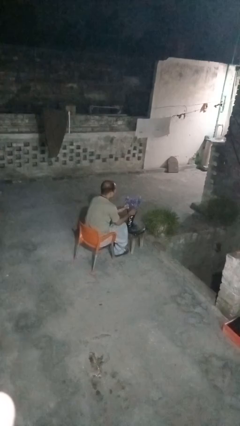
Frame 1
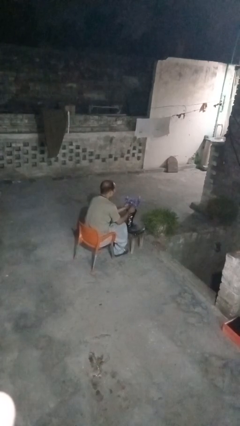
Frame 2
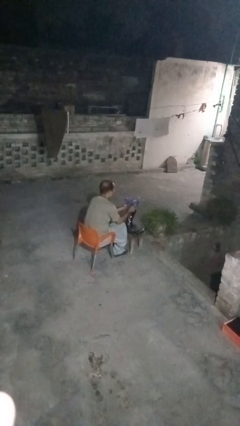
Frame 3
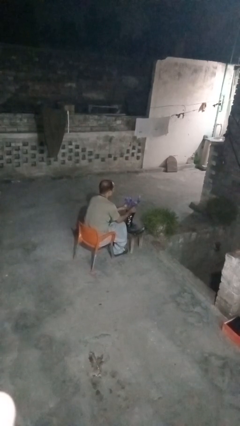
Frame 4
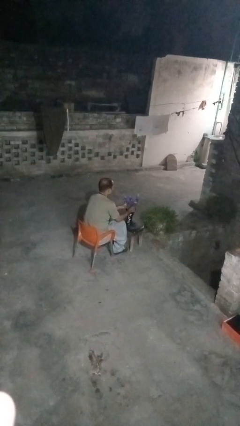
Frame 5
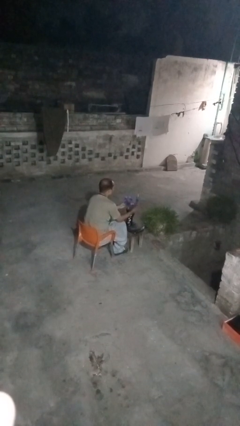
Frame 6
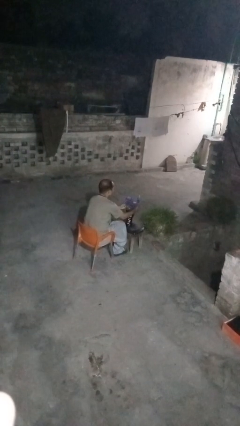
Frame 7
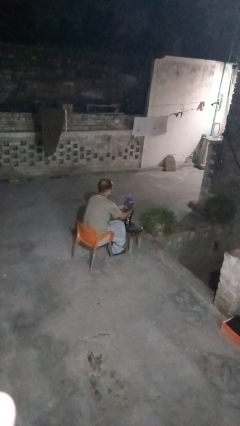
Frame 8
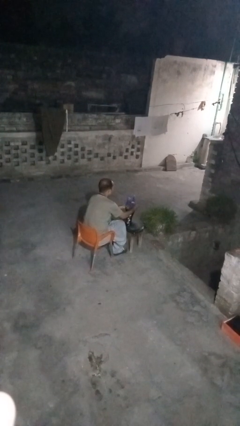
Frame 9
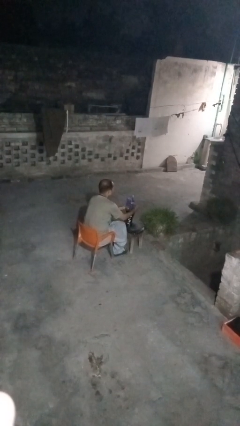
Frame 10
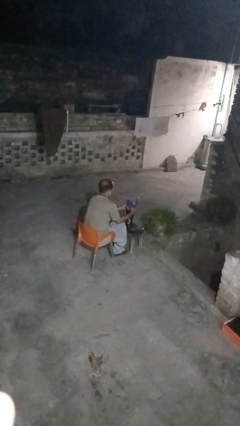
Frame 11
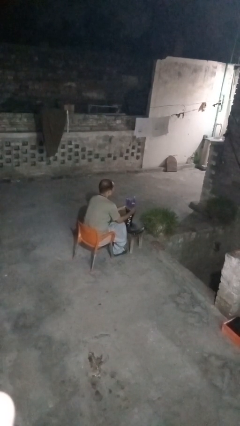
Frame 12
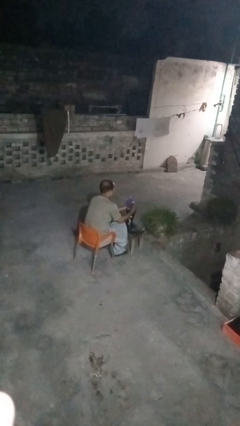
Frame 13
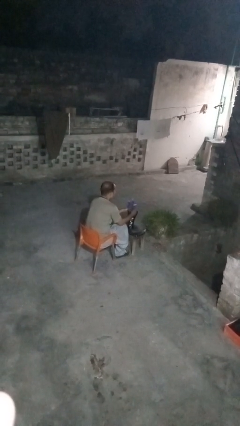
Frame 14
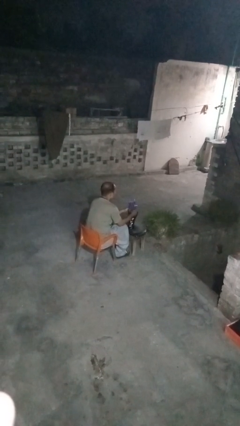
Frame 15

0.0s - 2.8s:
person arranges flowers in vase

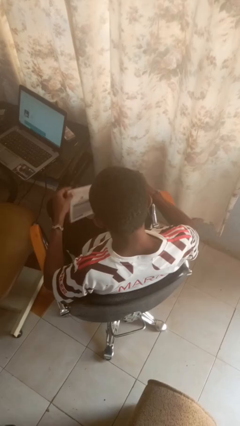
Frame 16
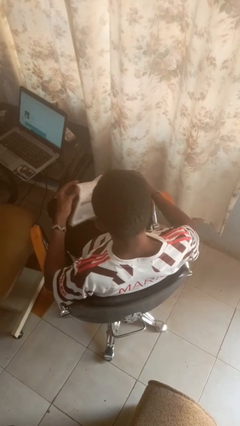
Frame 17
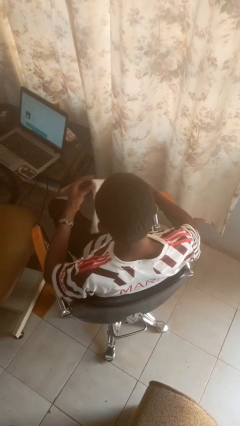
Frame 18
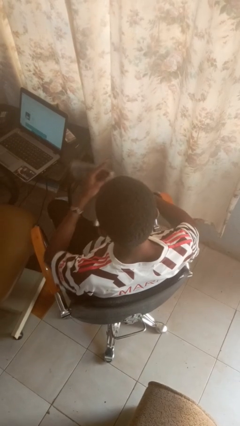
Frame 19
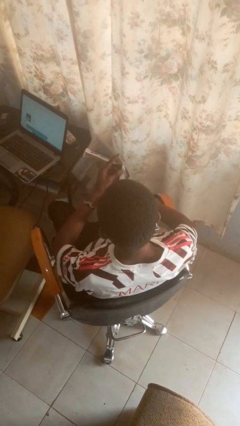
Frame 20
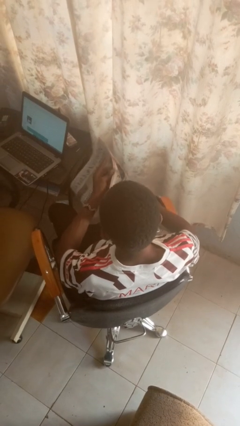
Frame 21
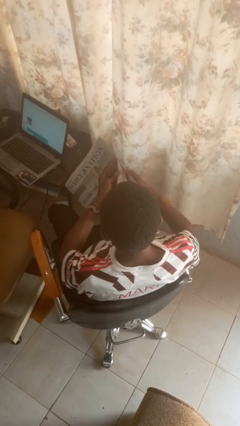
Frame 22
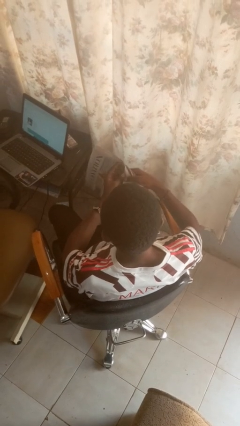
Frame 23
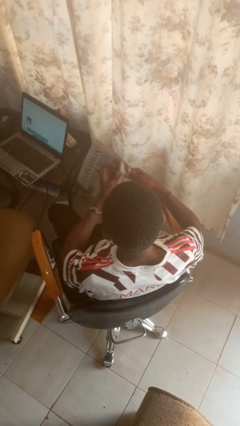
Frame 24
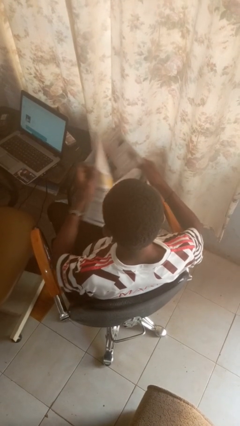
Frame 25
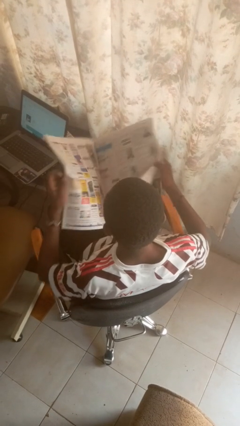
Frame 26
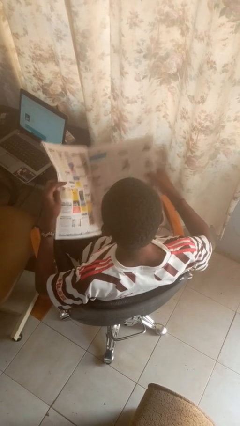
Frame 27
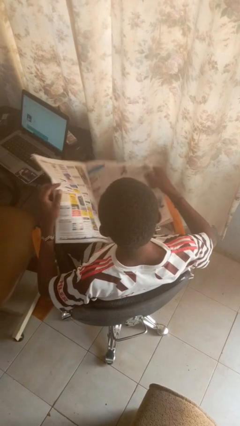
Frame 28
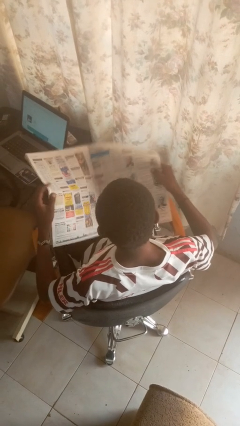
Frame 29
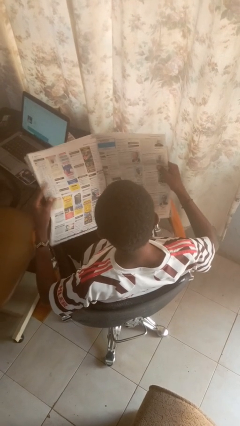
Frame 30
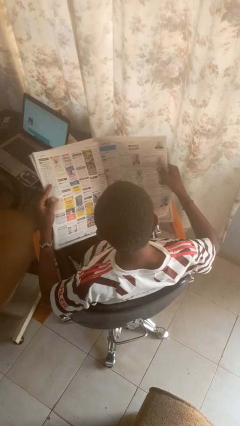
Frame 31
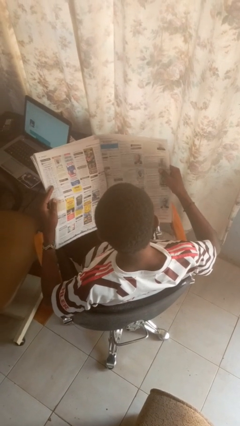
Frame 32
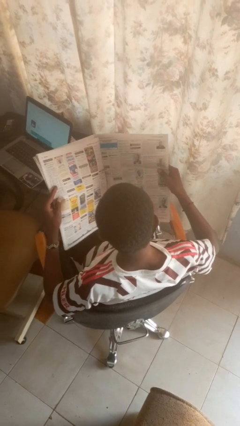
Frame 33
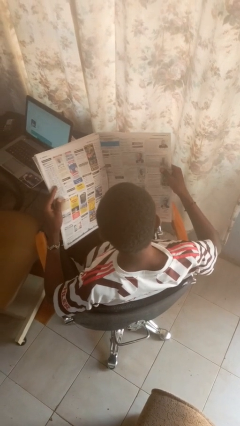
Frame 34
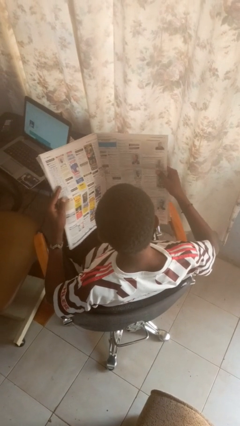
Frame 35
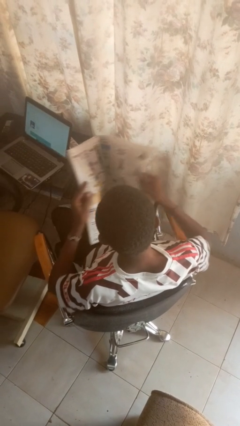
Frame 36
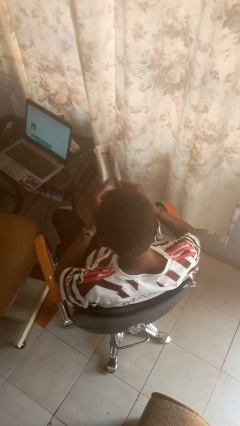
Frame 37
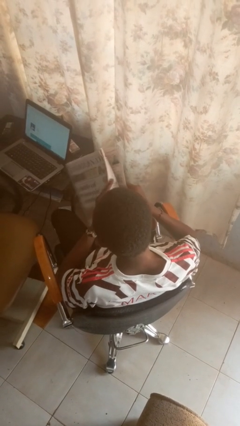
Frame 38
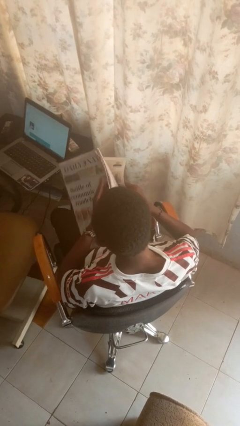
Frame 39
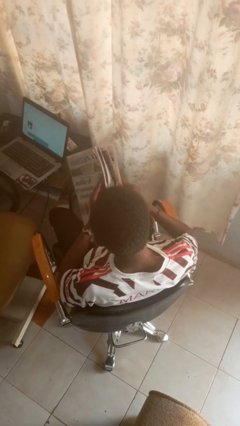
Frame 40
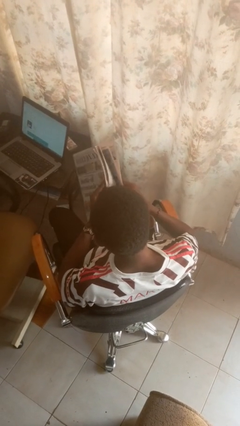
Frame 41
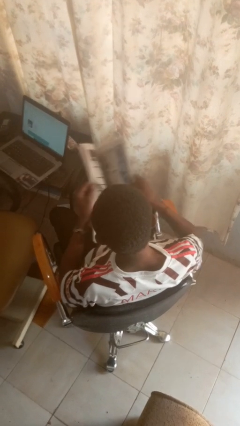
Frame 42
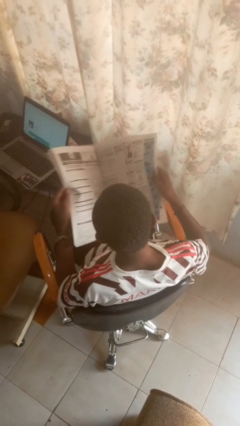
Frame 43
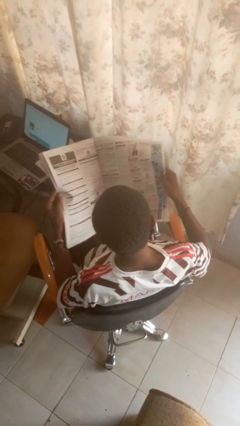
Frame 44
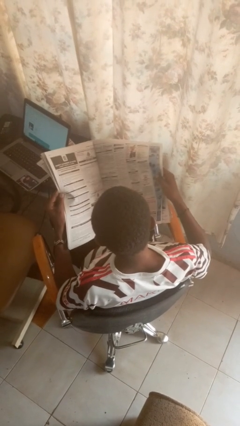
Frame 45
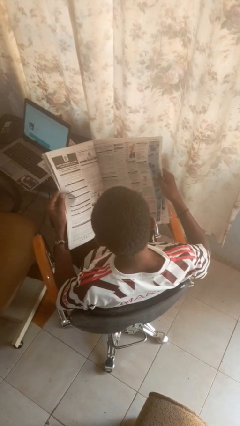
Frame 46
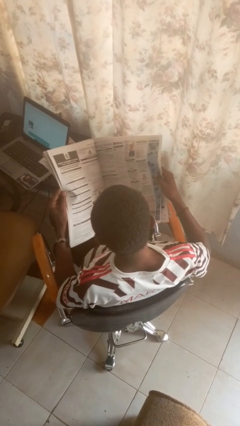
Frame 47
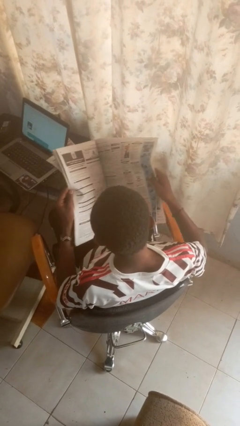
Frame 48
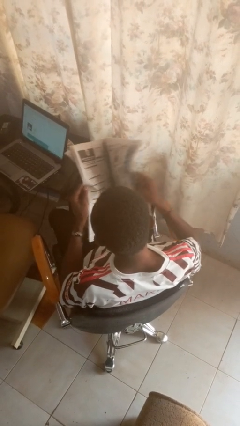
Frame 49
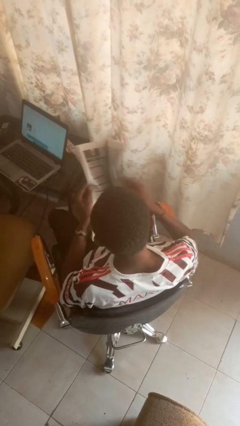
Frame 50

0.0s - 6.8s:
person reads newspaper

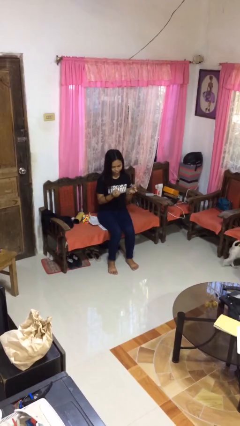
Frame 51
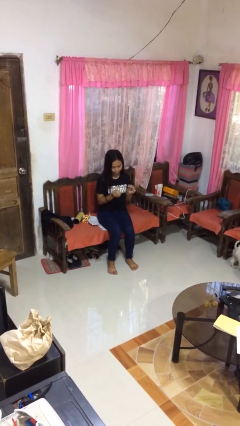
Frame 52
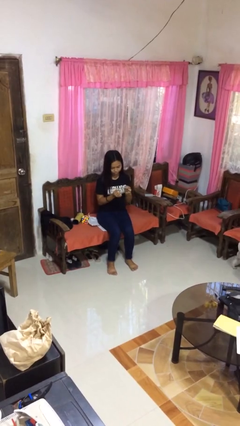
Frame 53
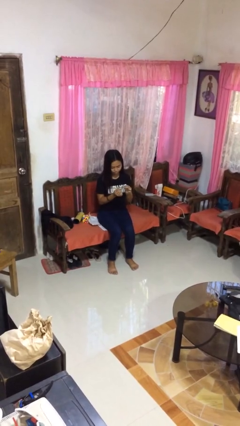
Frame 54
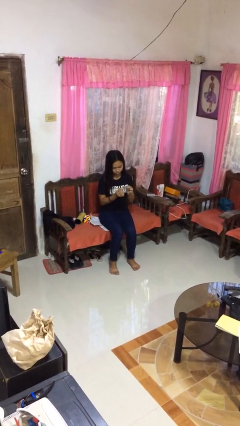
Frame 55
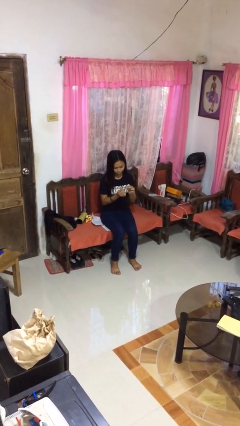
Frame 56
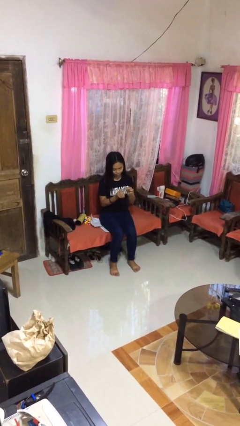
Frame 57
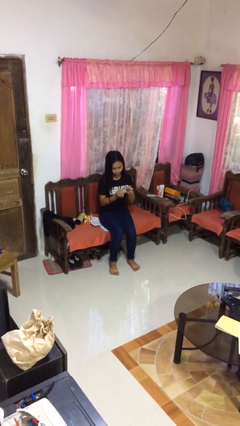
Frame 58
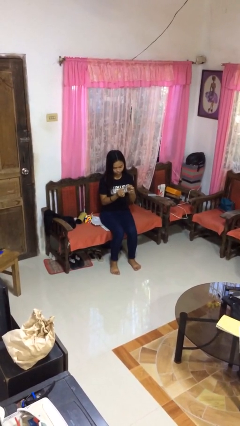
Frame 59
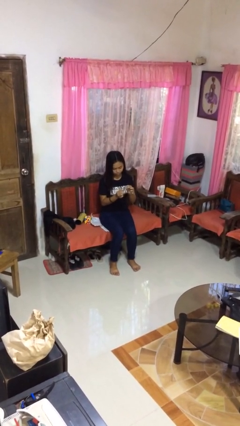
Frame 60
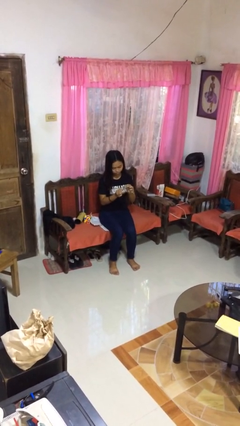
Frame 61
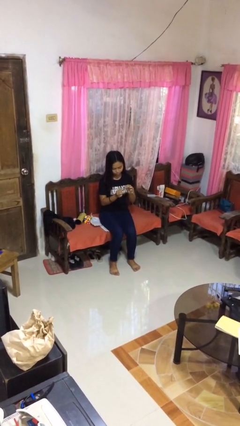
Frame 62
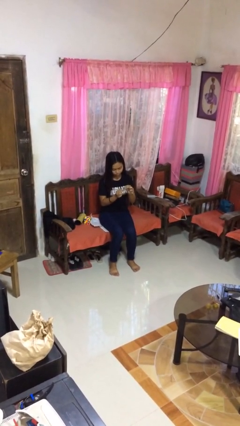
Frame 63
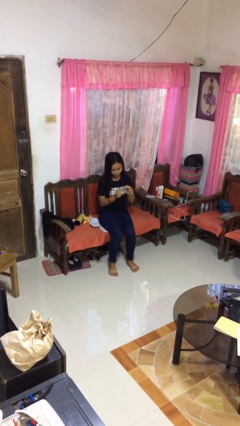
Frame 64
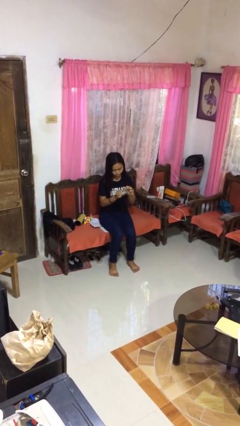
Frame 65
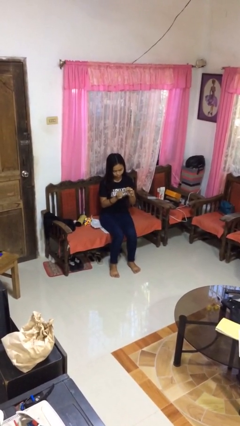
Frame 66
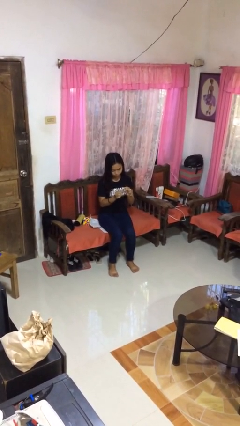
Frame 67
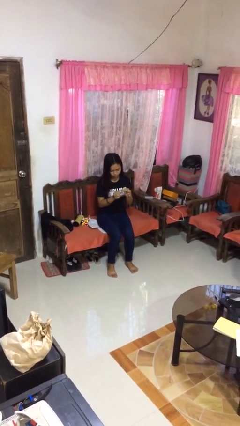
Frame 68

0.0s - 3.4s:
person clips fingernails

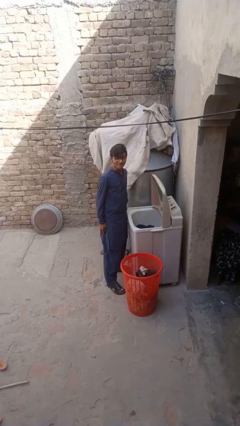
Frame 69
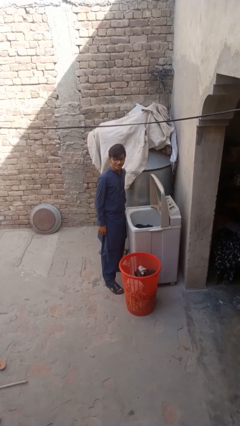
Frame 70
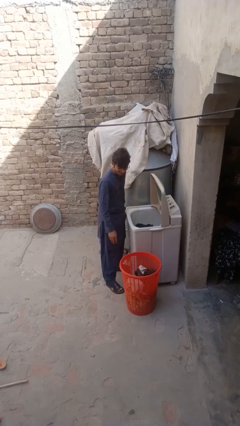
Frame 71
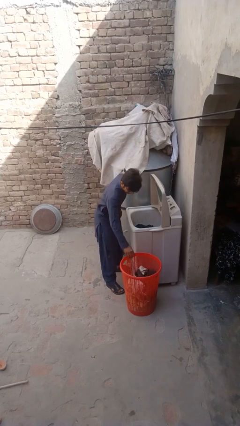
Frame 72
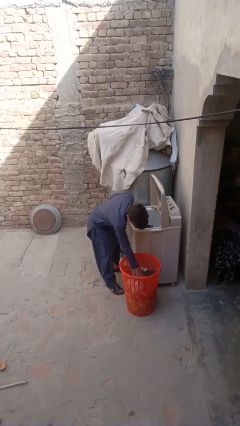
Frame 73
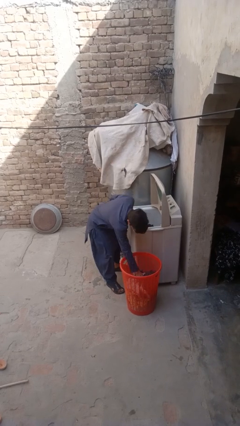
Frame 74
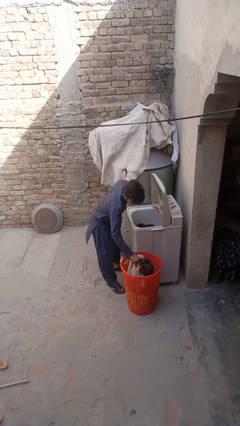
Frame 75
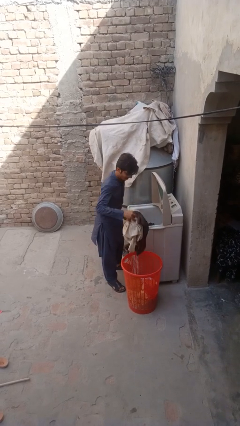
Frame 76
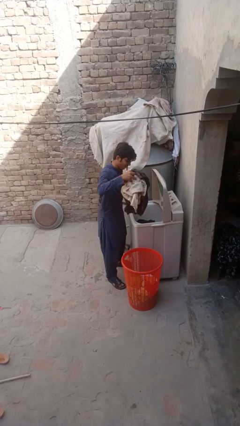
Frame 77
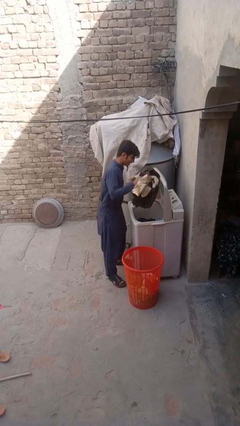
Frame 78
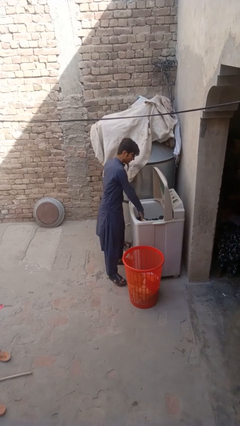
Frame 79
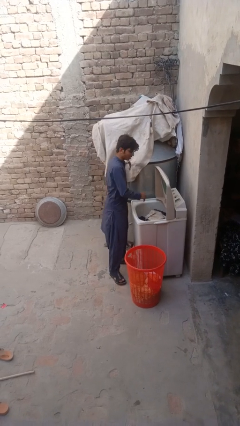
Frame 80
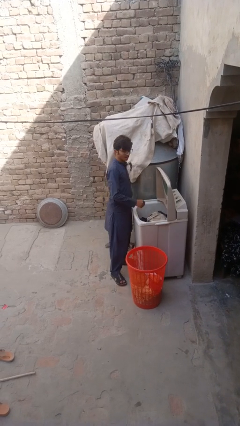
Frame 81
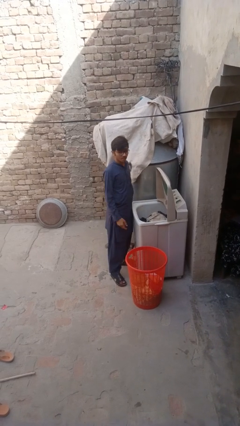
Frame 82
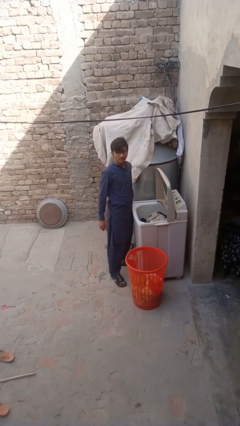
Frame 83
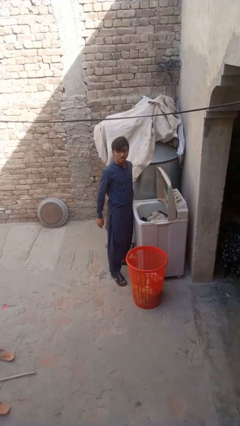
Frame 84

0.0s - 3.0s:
person loads clotheswasher

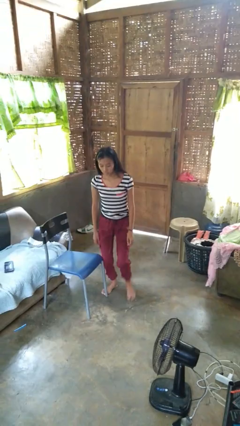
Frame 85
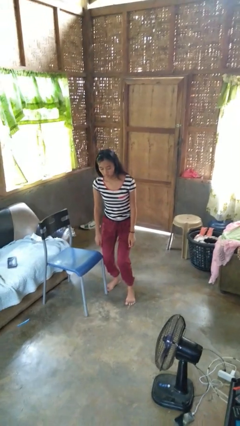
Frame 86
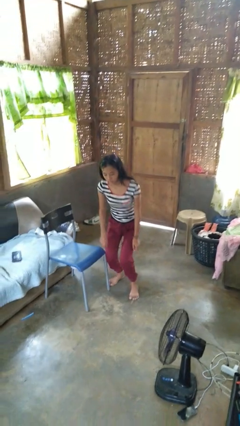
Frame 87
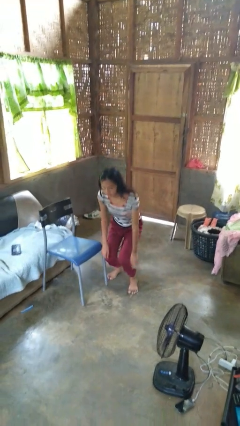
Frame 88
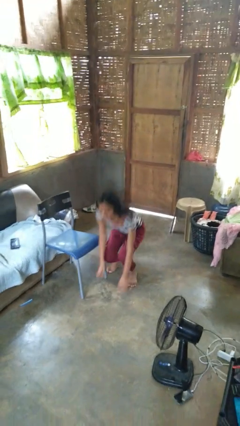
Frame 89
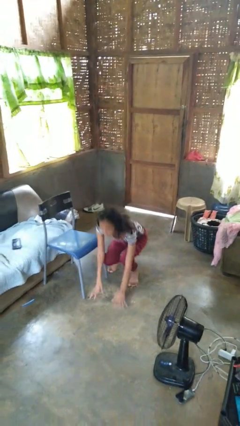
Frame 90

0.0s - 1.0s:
person trips on object on floor

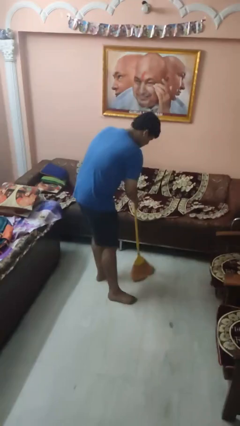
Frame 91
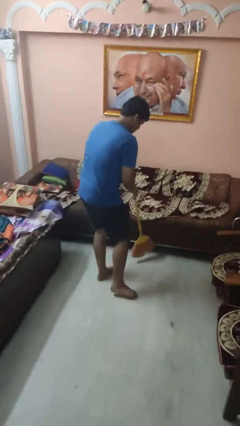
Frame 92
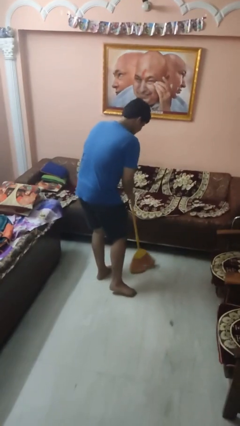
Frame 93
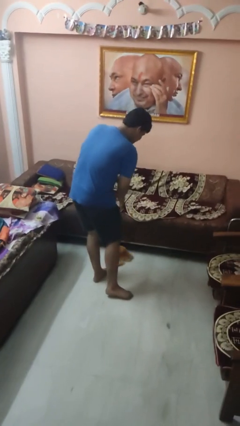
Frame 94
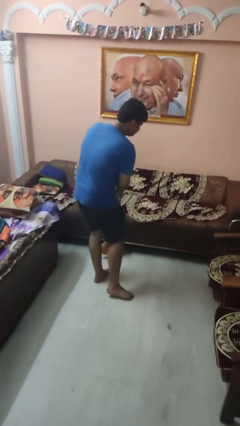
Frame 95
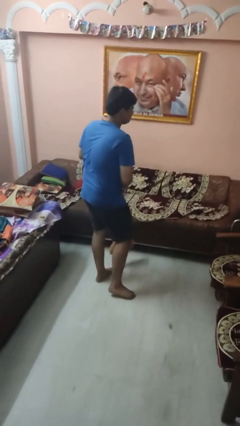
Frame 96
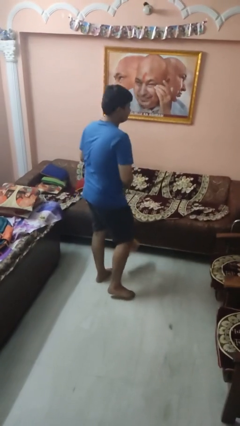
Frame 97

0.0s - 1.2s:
person sweeps floor
